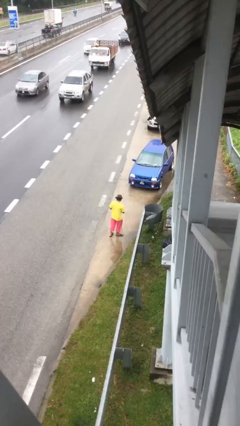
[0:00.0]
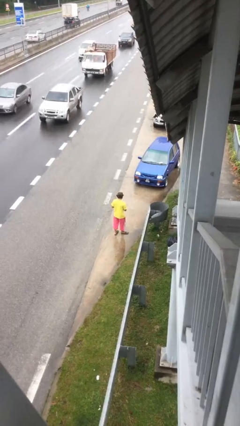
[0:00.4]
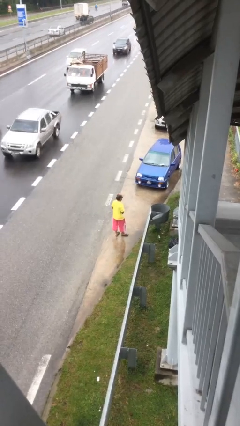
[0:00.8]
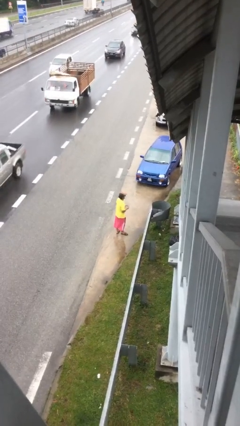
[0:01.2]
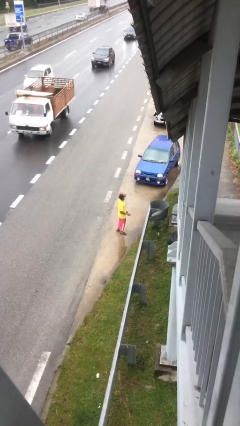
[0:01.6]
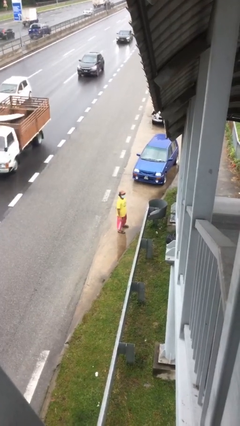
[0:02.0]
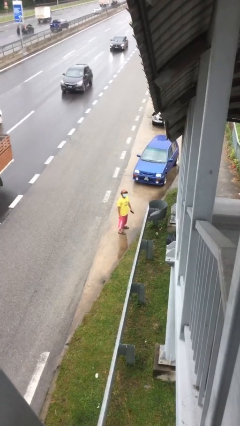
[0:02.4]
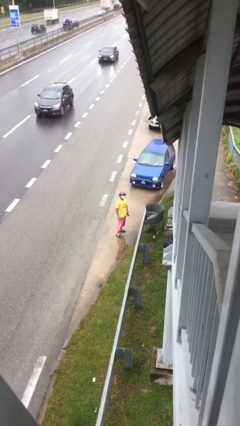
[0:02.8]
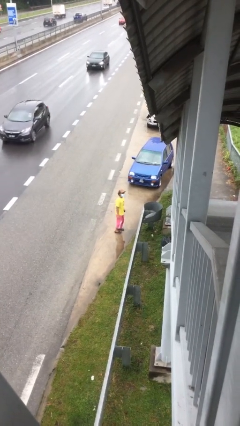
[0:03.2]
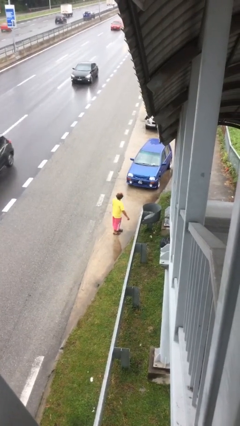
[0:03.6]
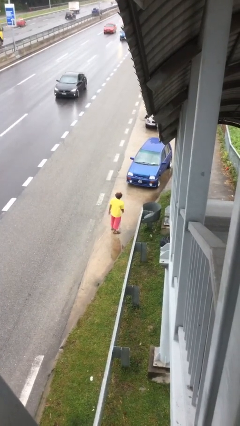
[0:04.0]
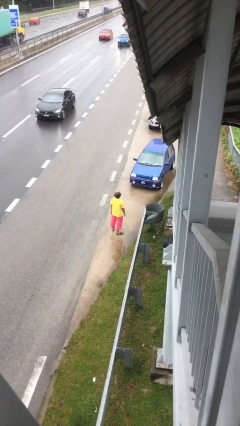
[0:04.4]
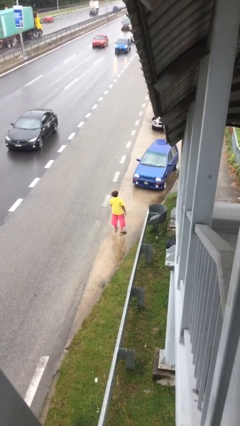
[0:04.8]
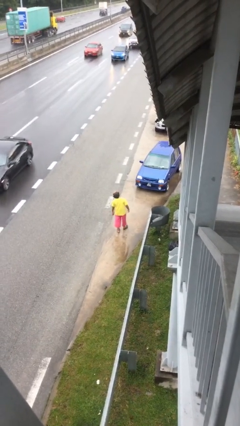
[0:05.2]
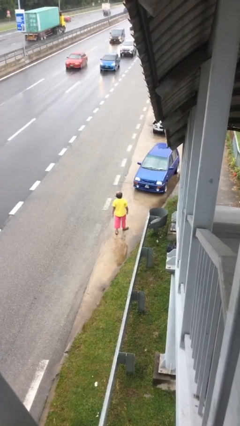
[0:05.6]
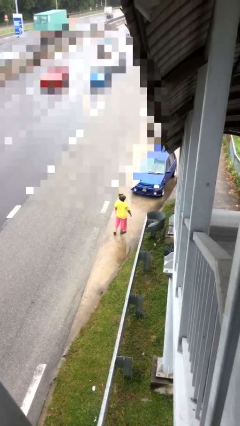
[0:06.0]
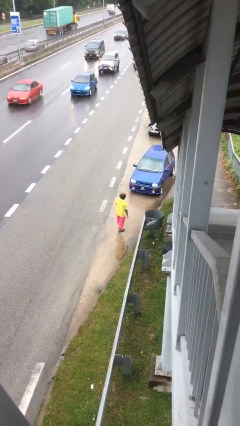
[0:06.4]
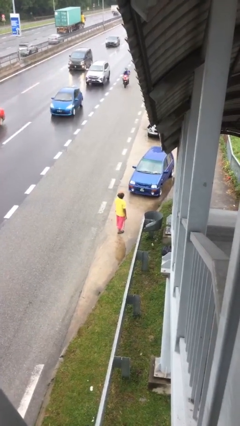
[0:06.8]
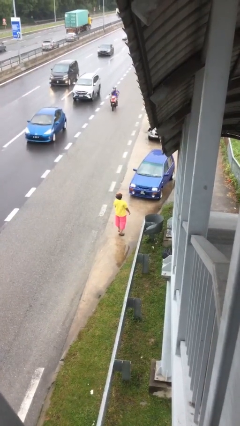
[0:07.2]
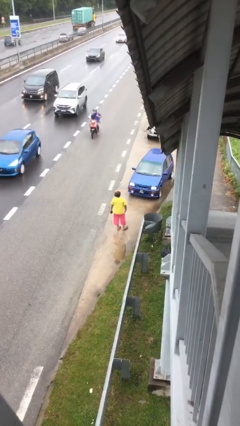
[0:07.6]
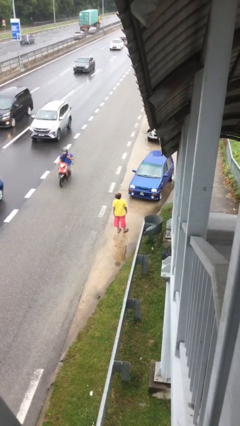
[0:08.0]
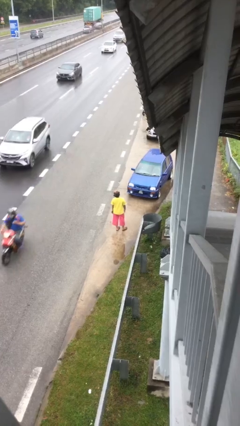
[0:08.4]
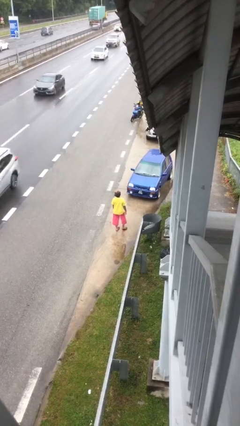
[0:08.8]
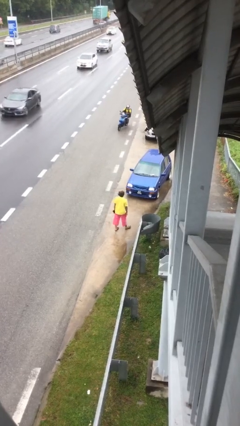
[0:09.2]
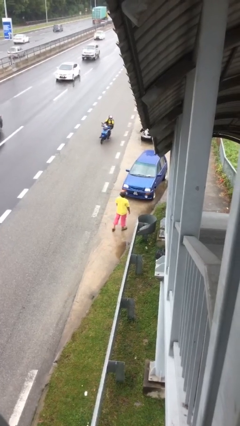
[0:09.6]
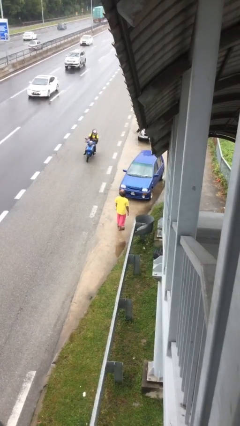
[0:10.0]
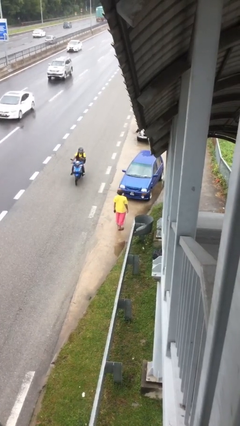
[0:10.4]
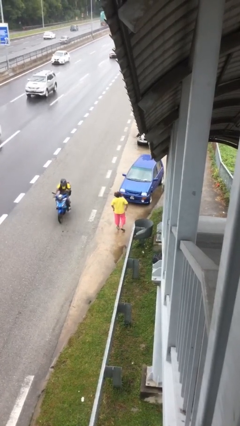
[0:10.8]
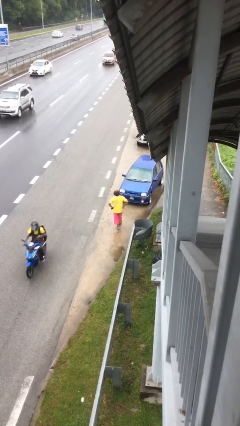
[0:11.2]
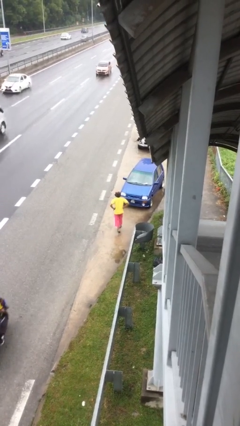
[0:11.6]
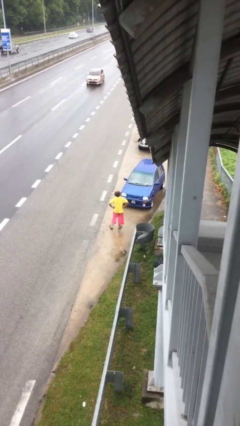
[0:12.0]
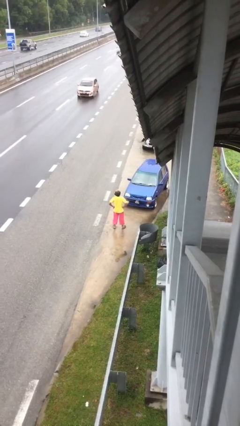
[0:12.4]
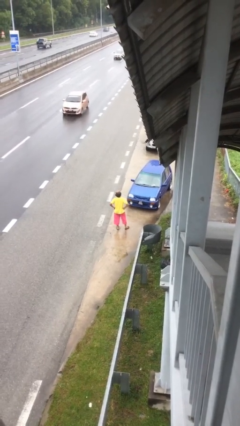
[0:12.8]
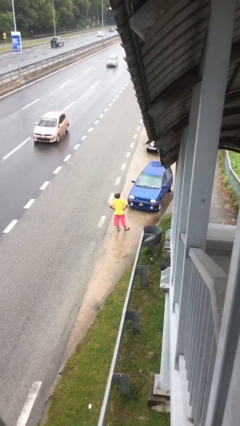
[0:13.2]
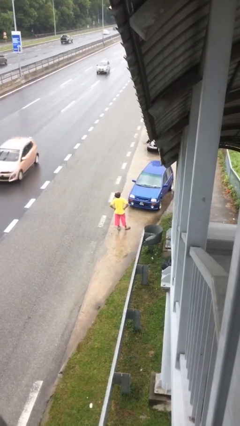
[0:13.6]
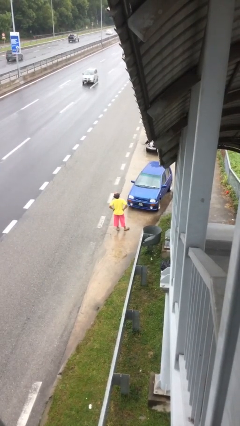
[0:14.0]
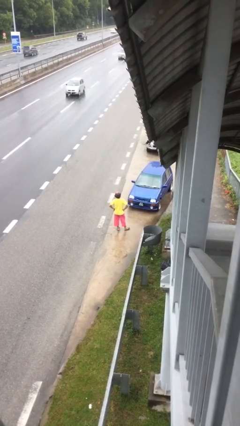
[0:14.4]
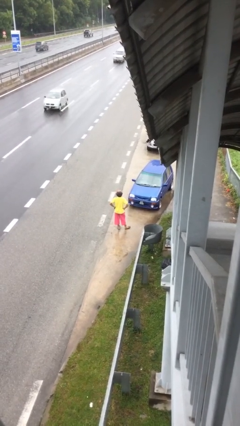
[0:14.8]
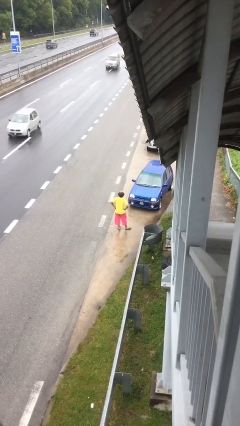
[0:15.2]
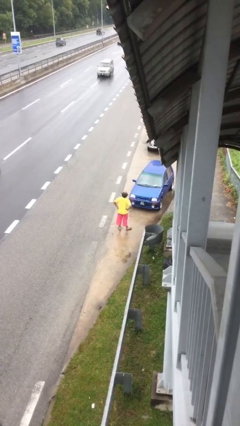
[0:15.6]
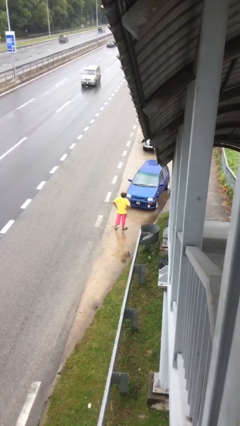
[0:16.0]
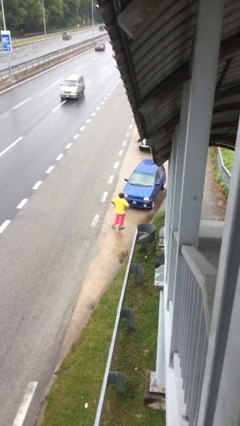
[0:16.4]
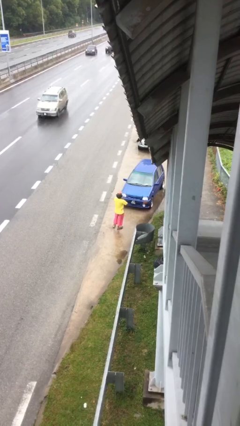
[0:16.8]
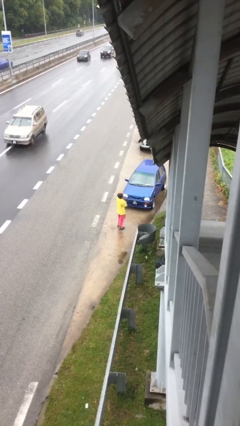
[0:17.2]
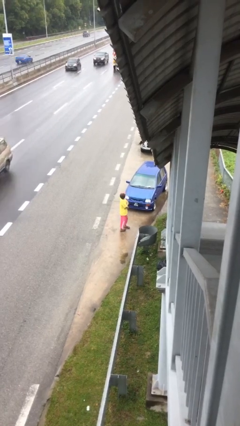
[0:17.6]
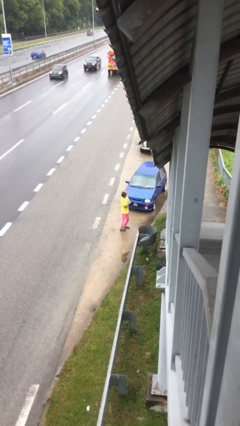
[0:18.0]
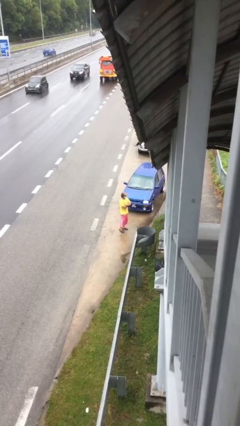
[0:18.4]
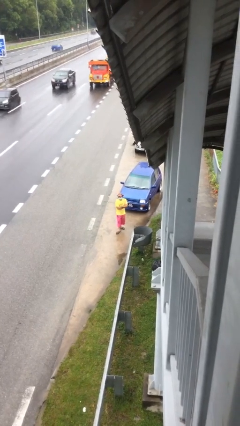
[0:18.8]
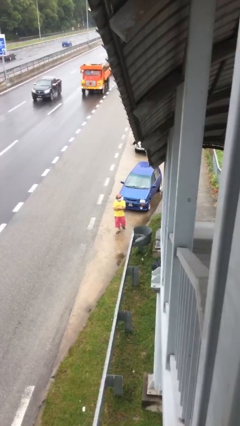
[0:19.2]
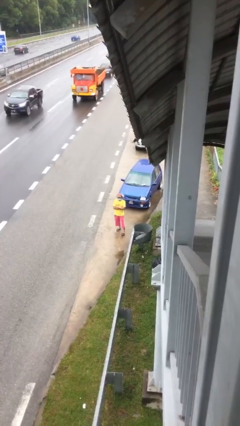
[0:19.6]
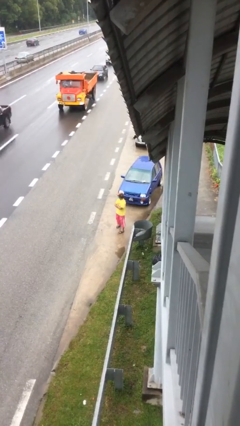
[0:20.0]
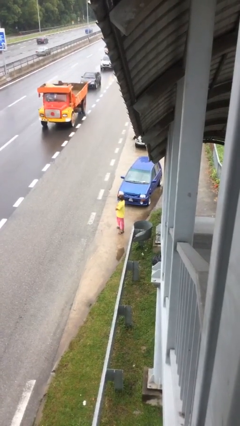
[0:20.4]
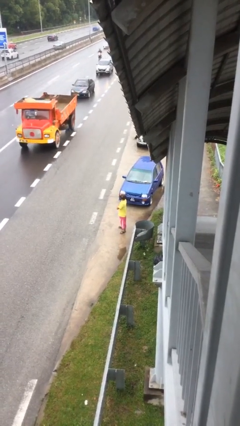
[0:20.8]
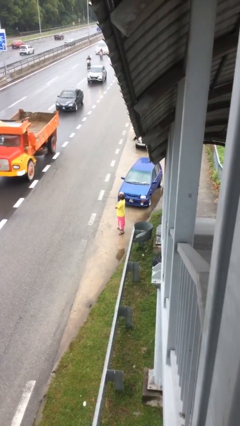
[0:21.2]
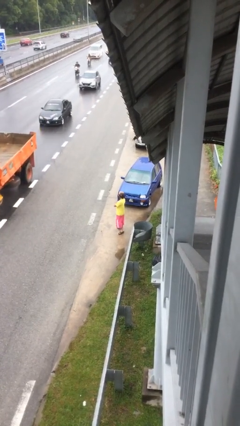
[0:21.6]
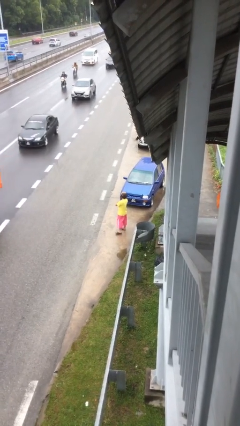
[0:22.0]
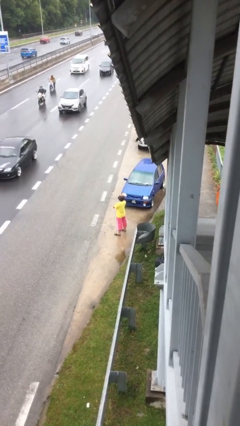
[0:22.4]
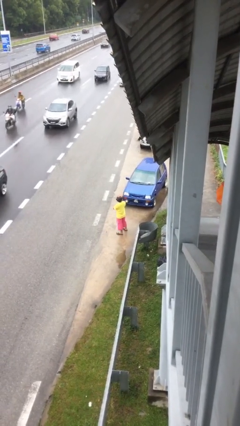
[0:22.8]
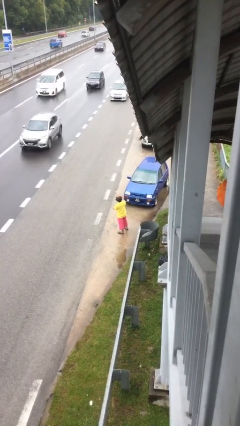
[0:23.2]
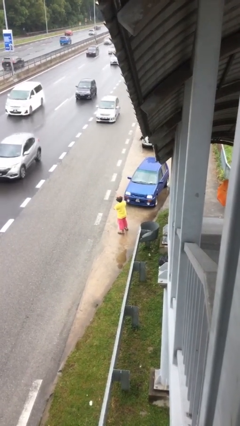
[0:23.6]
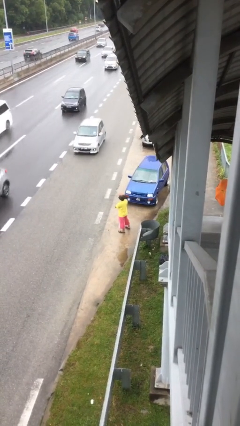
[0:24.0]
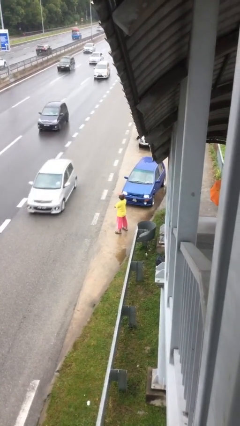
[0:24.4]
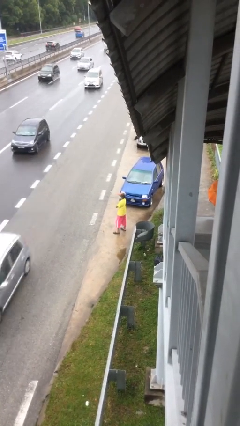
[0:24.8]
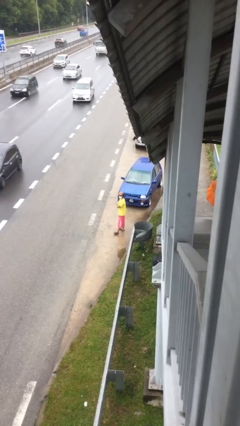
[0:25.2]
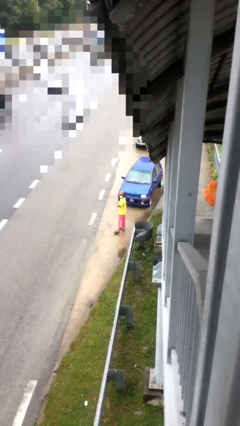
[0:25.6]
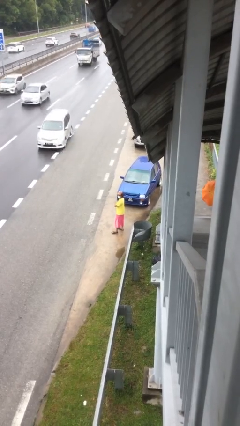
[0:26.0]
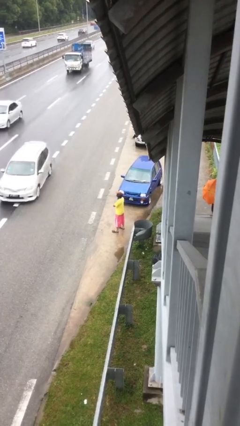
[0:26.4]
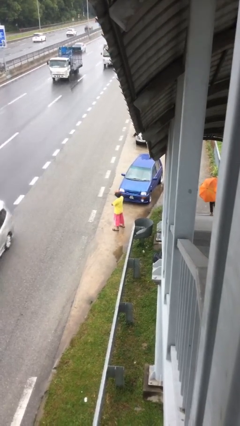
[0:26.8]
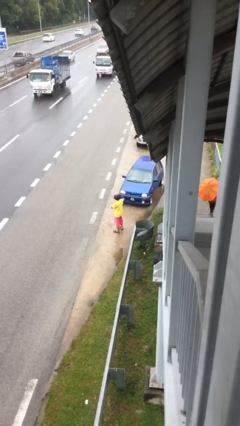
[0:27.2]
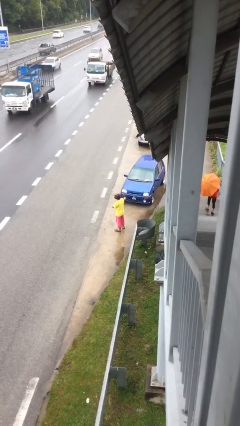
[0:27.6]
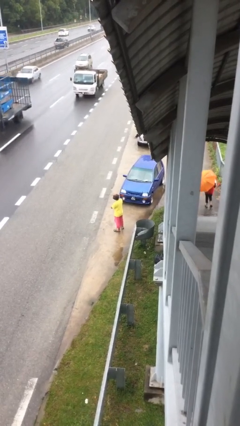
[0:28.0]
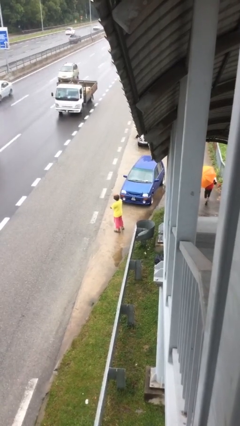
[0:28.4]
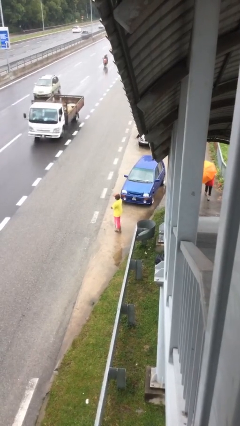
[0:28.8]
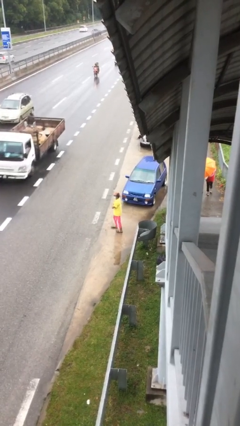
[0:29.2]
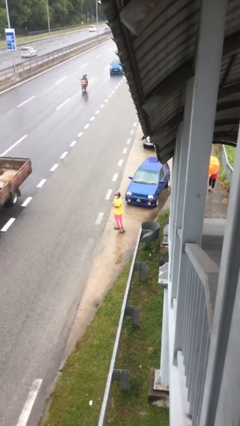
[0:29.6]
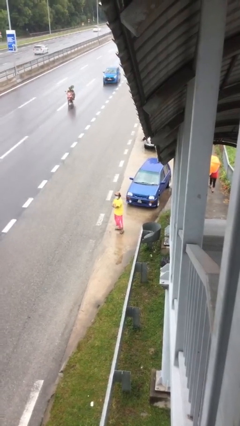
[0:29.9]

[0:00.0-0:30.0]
person walks

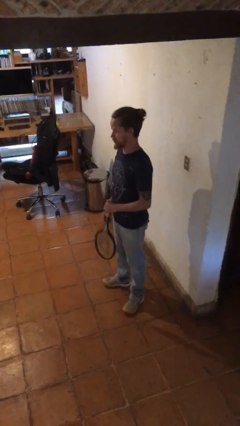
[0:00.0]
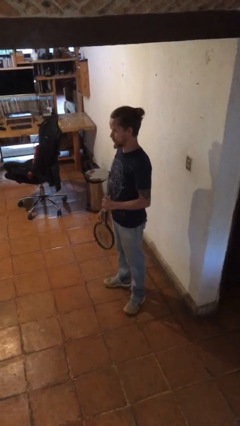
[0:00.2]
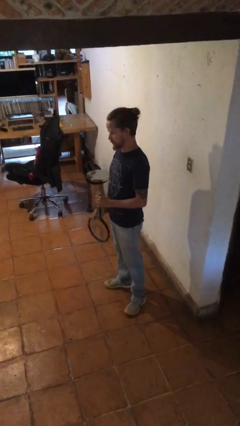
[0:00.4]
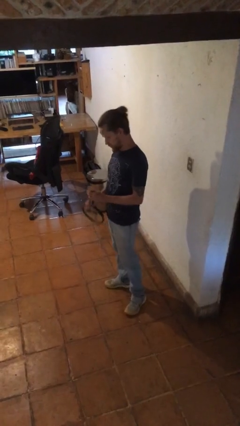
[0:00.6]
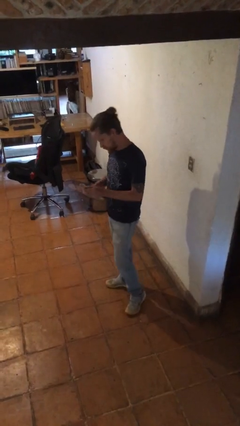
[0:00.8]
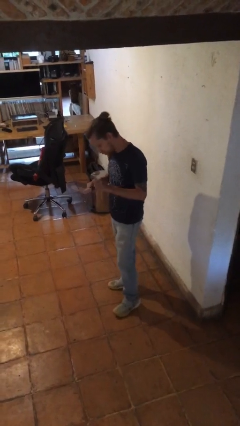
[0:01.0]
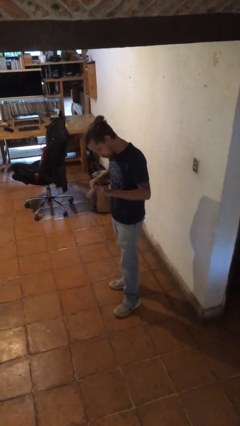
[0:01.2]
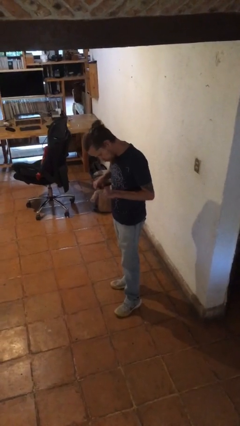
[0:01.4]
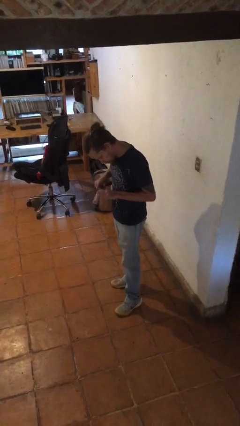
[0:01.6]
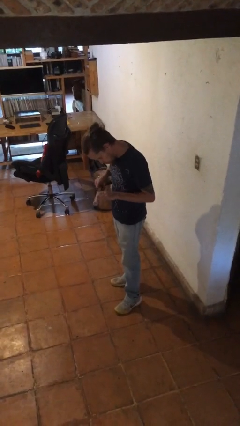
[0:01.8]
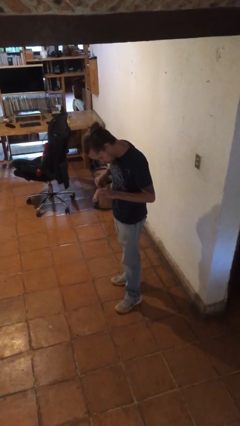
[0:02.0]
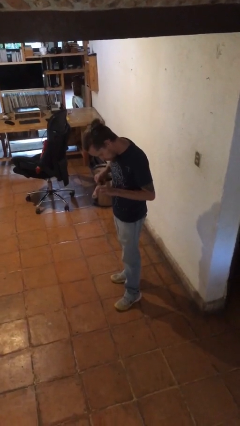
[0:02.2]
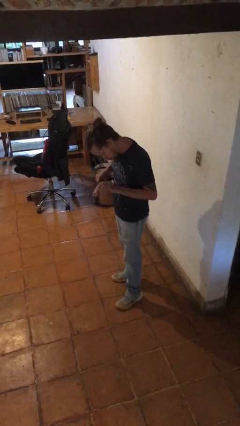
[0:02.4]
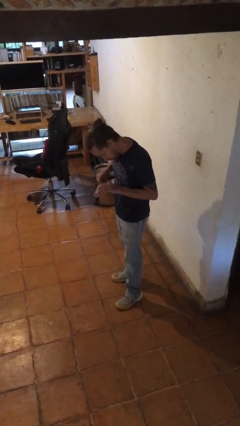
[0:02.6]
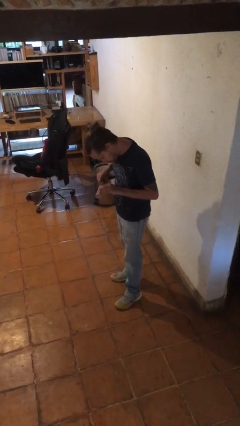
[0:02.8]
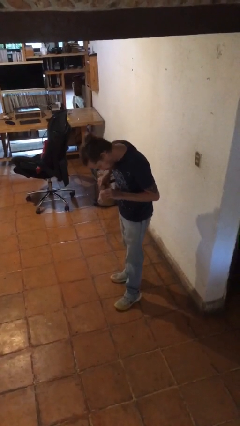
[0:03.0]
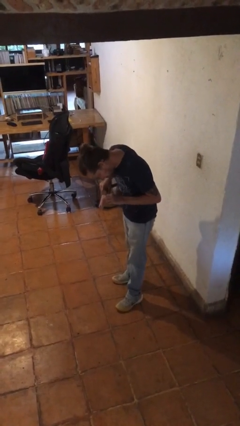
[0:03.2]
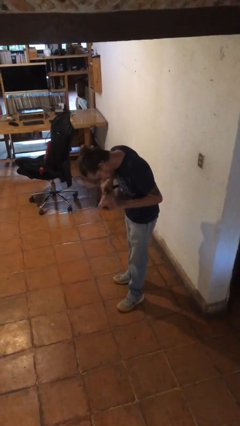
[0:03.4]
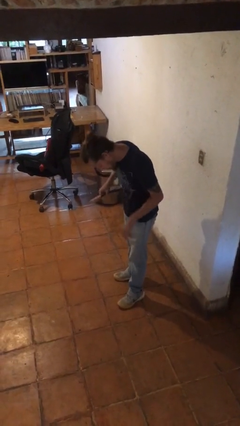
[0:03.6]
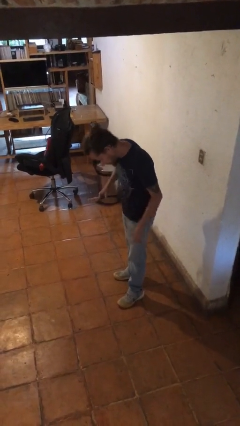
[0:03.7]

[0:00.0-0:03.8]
person taps object with finger
